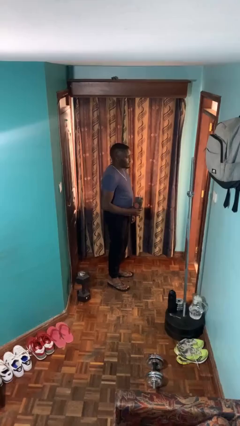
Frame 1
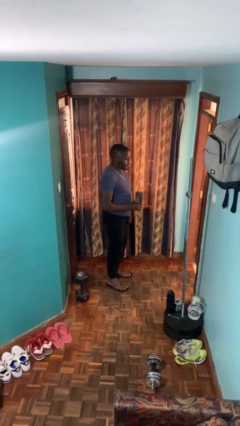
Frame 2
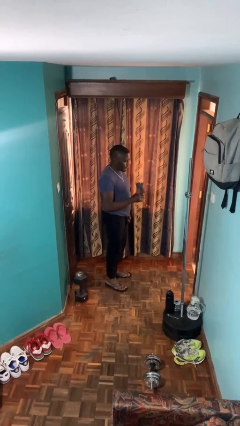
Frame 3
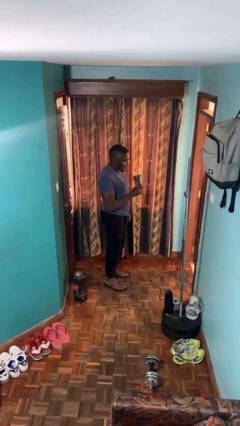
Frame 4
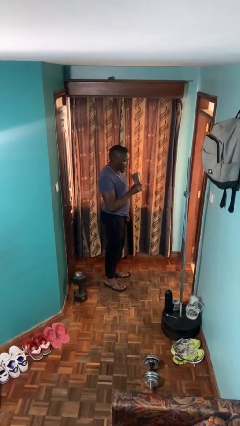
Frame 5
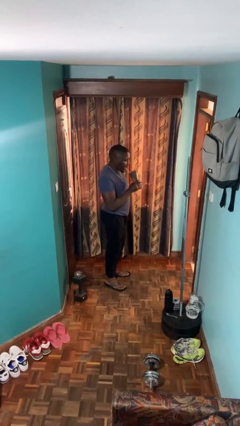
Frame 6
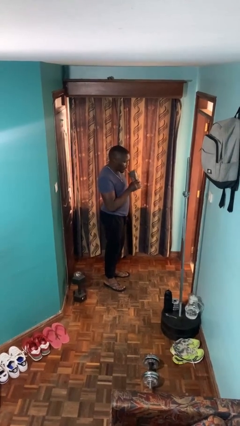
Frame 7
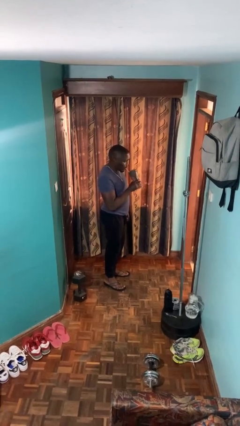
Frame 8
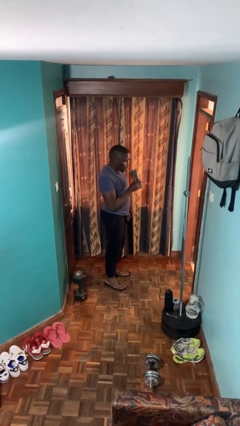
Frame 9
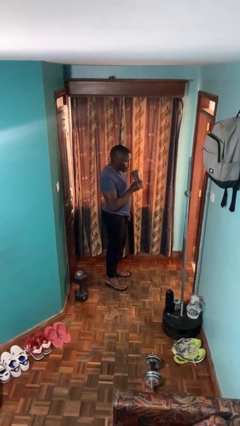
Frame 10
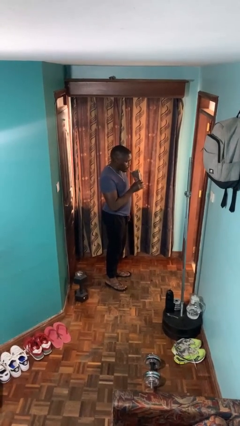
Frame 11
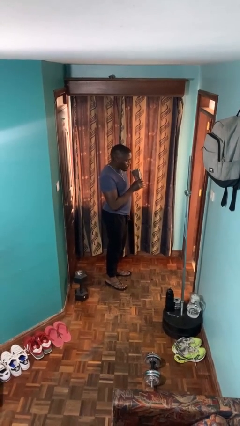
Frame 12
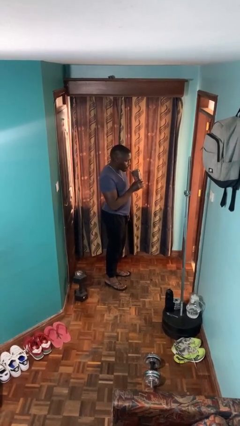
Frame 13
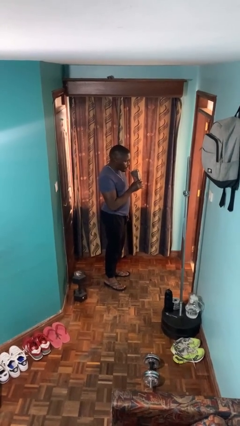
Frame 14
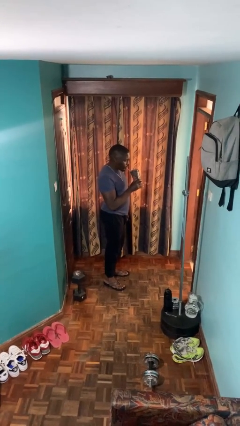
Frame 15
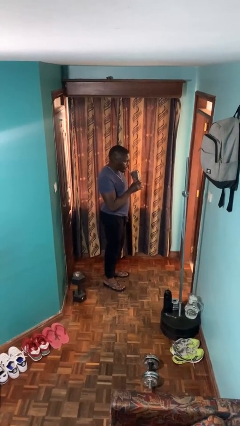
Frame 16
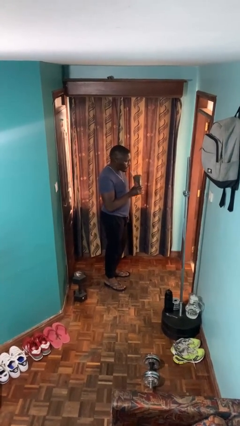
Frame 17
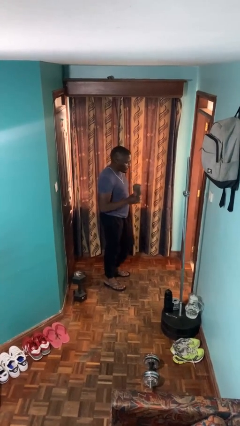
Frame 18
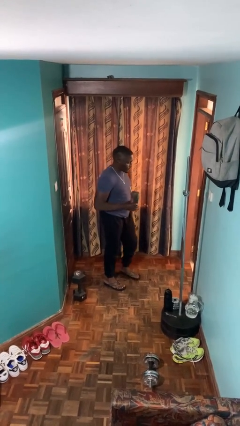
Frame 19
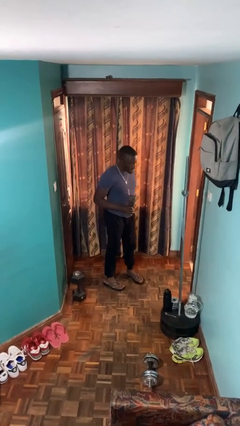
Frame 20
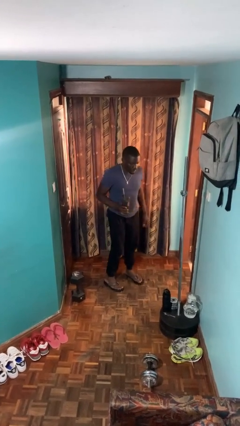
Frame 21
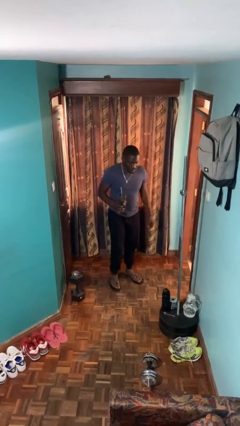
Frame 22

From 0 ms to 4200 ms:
person drinks from straw

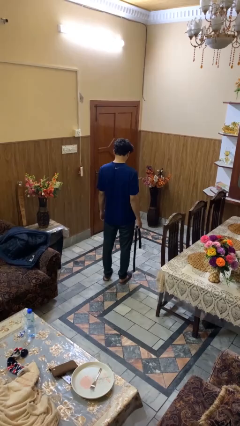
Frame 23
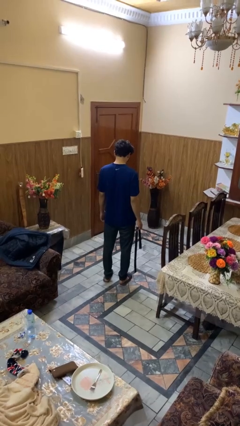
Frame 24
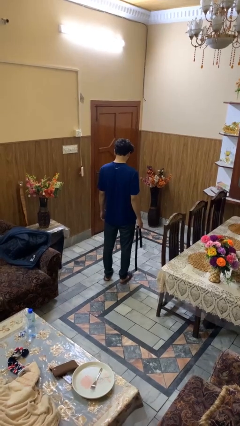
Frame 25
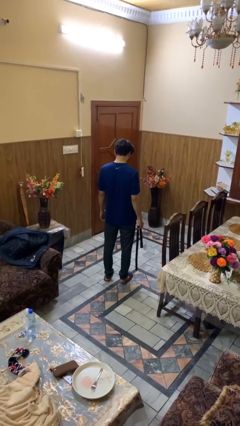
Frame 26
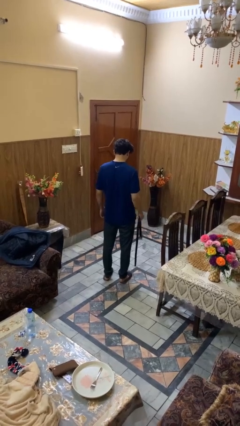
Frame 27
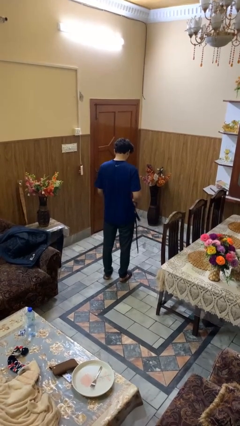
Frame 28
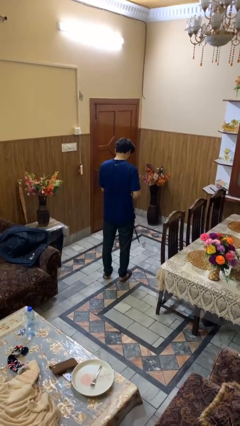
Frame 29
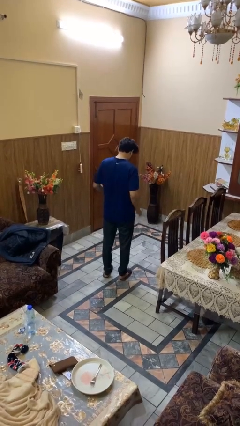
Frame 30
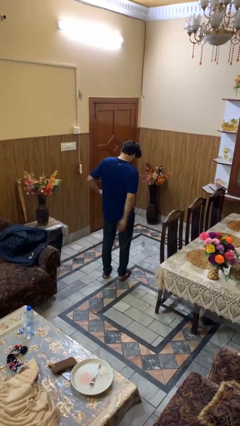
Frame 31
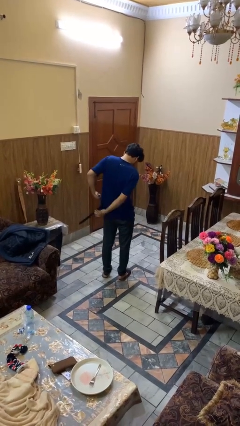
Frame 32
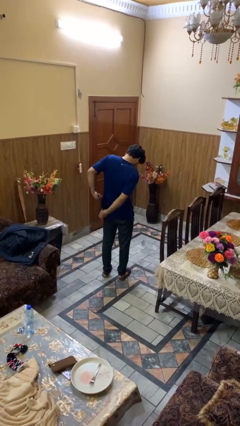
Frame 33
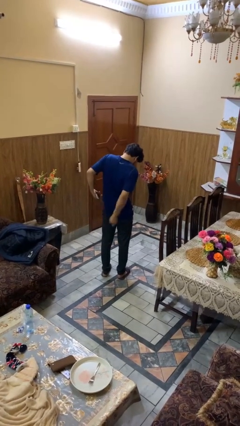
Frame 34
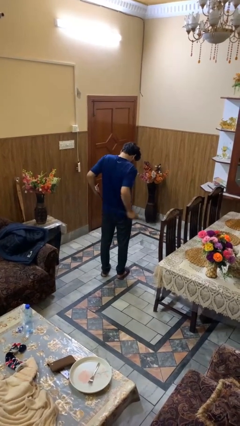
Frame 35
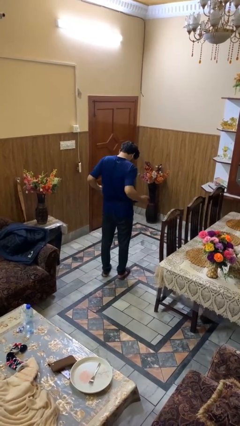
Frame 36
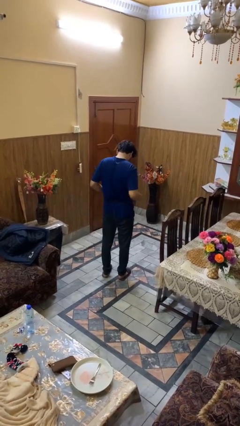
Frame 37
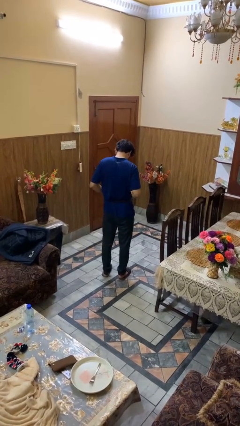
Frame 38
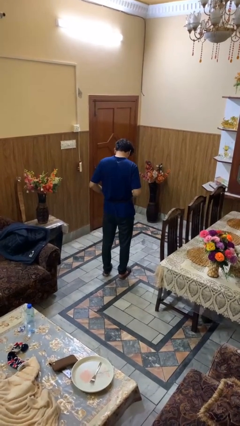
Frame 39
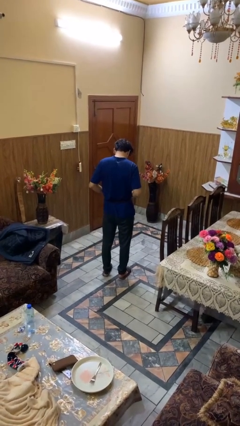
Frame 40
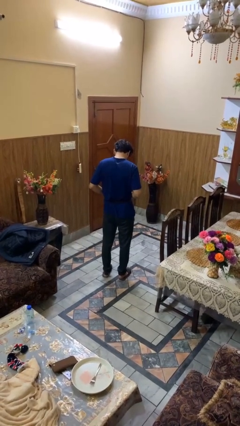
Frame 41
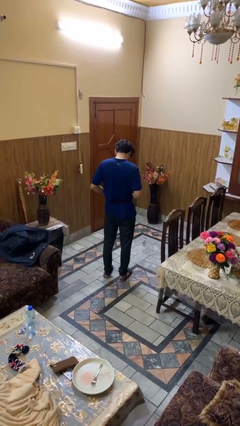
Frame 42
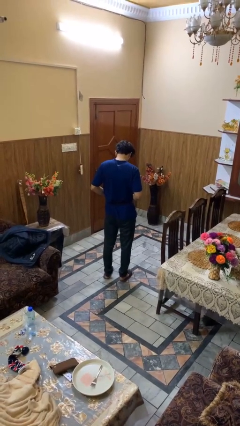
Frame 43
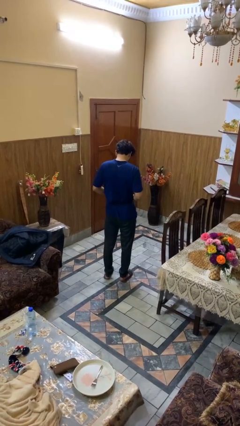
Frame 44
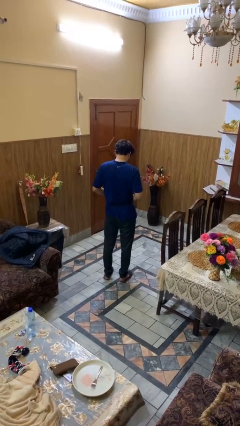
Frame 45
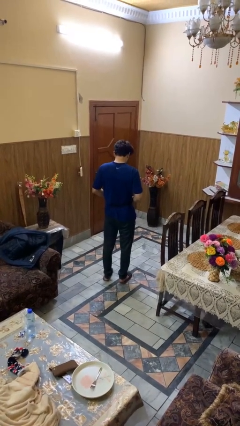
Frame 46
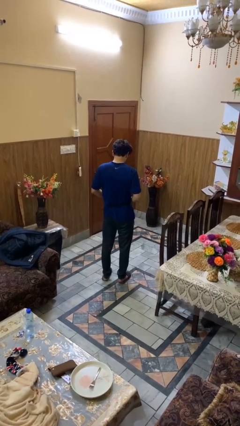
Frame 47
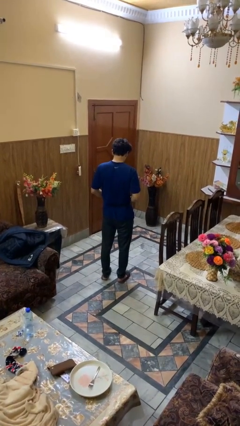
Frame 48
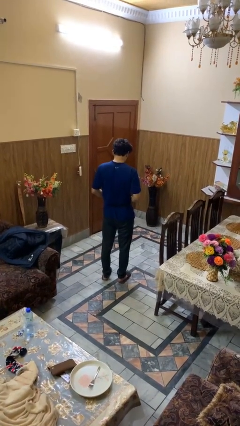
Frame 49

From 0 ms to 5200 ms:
person puts on belt

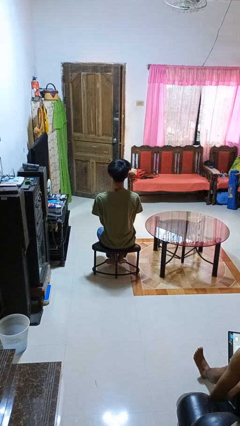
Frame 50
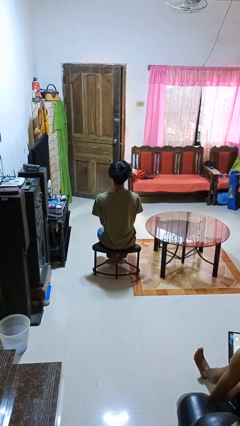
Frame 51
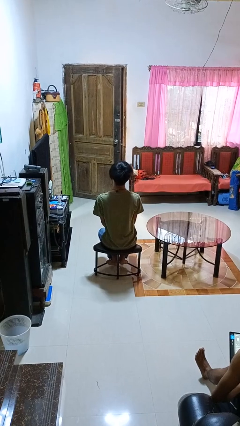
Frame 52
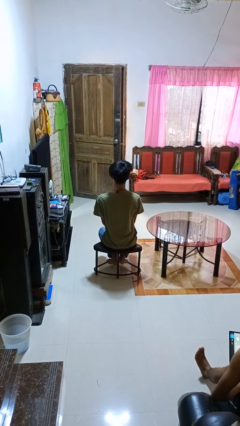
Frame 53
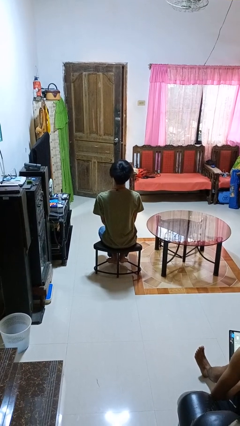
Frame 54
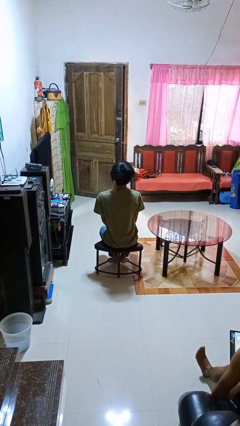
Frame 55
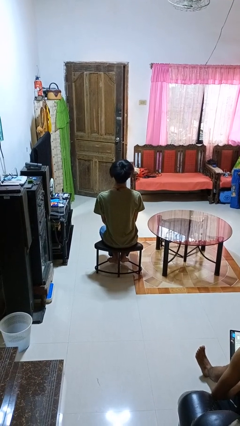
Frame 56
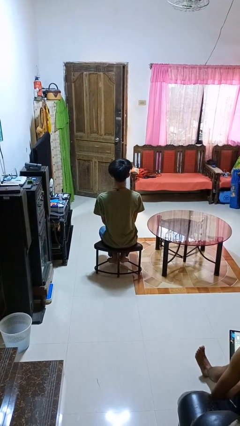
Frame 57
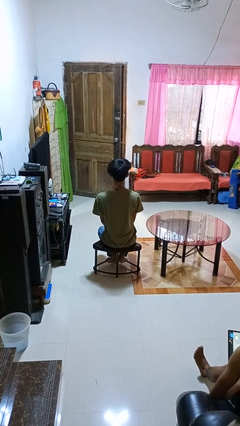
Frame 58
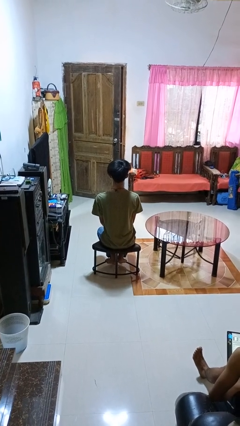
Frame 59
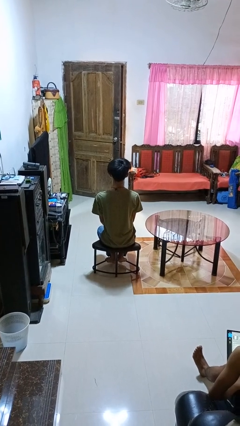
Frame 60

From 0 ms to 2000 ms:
person nods head

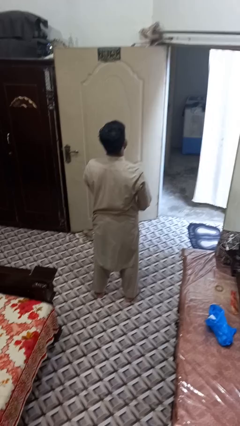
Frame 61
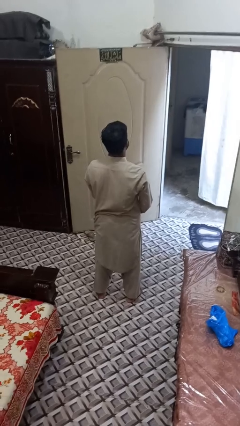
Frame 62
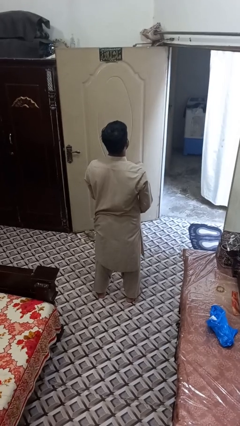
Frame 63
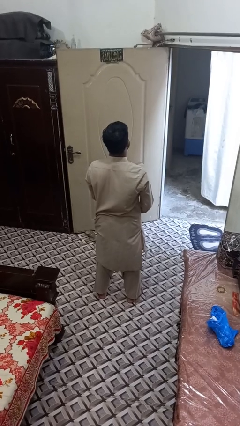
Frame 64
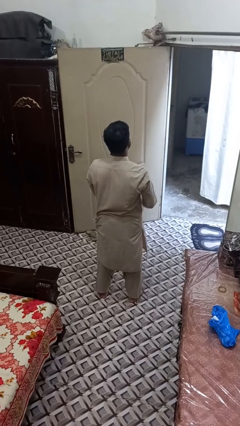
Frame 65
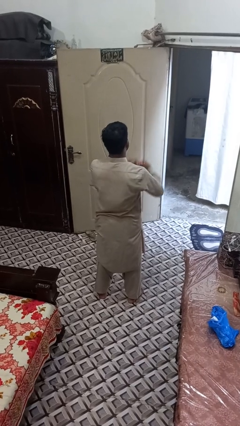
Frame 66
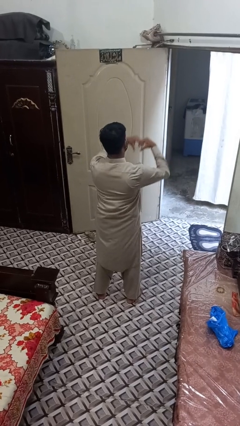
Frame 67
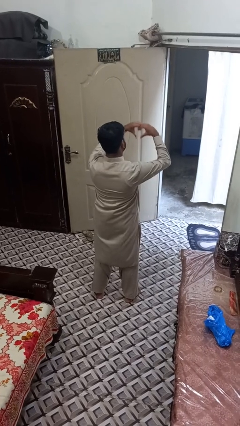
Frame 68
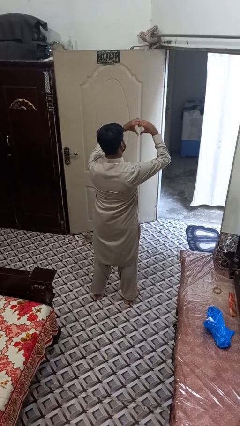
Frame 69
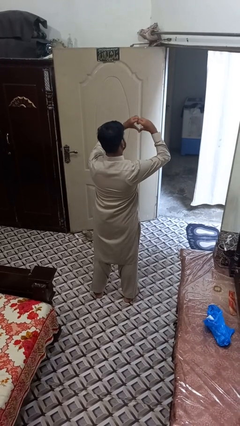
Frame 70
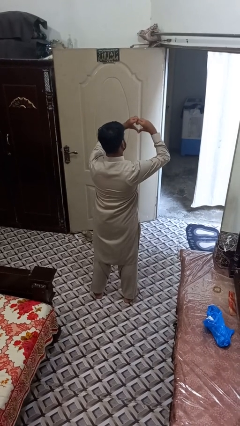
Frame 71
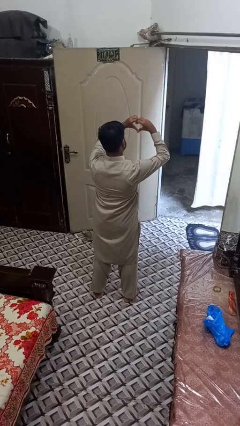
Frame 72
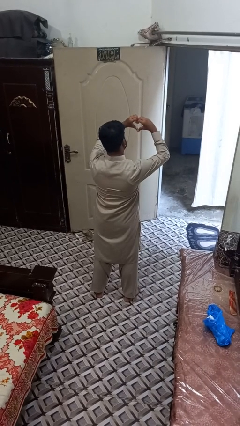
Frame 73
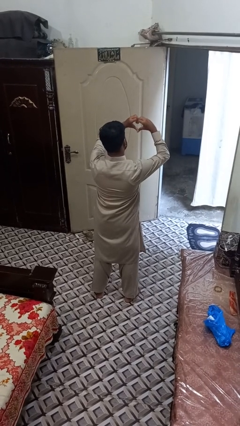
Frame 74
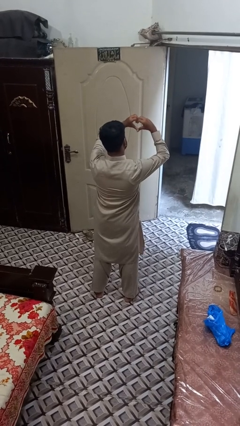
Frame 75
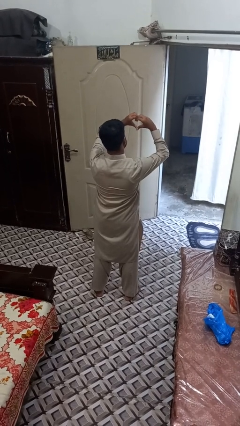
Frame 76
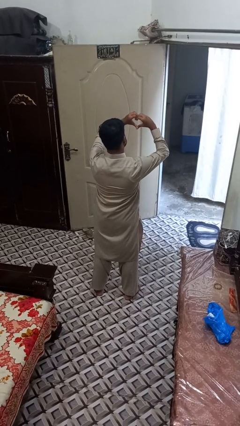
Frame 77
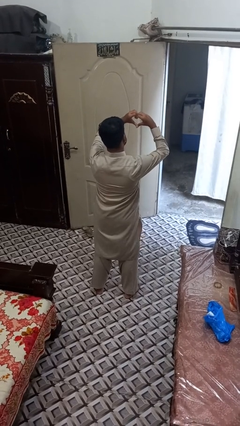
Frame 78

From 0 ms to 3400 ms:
person gestures heart

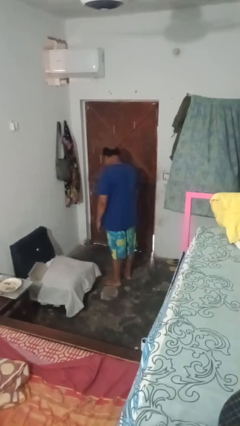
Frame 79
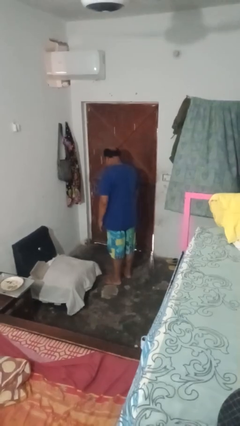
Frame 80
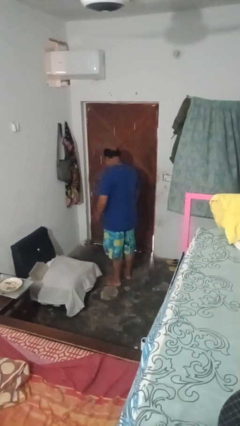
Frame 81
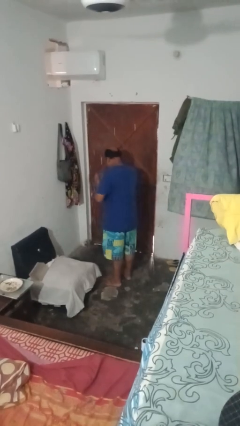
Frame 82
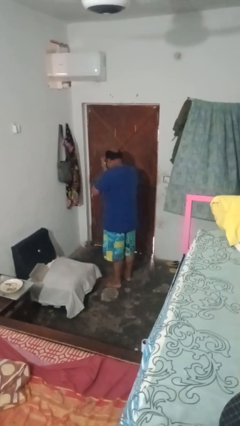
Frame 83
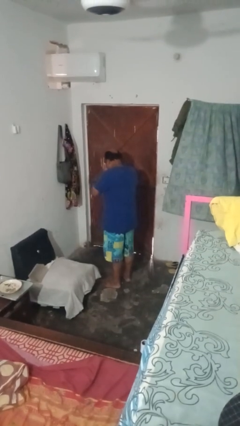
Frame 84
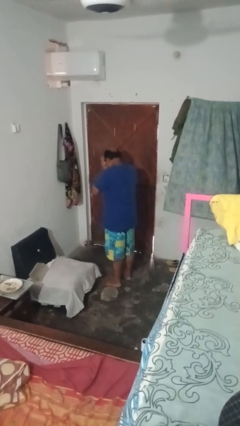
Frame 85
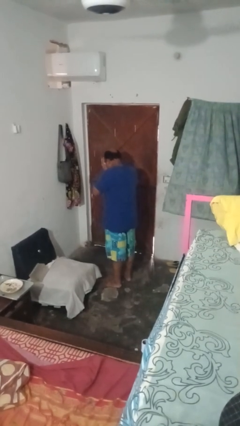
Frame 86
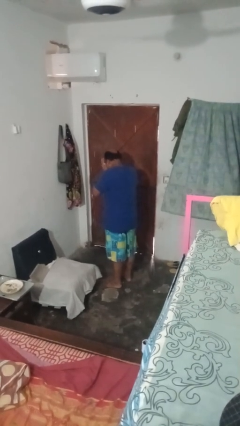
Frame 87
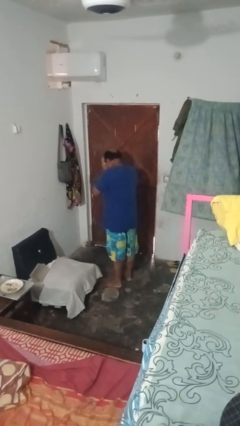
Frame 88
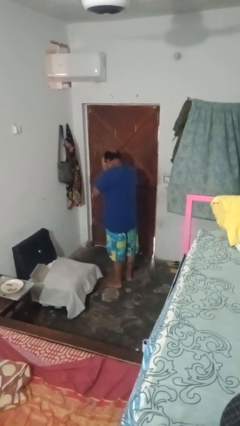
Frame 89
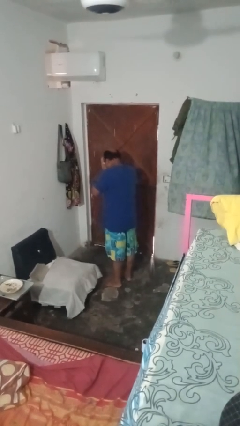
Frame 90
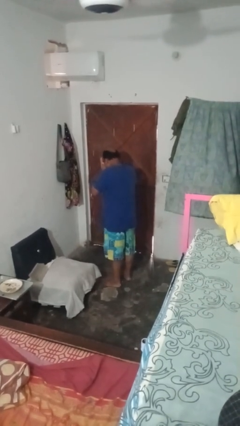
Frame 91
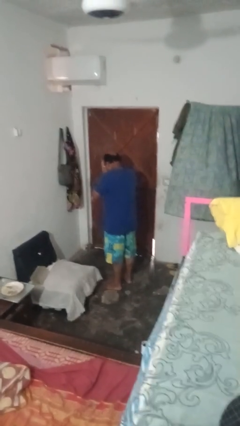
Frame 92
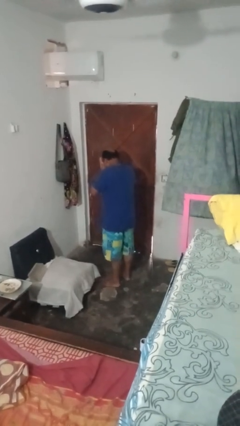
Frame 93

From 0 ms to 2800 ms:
person covers face with hands
